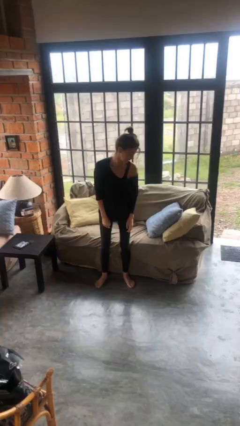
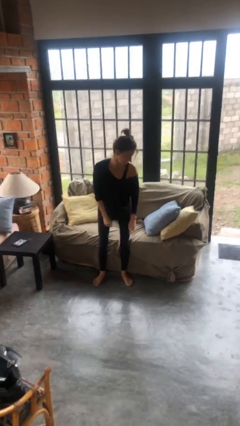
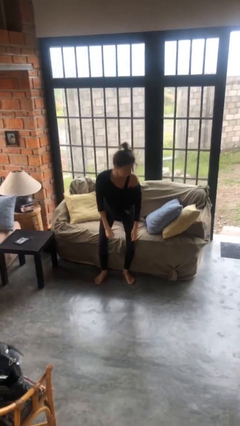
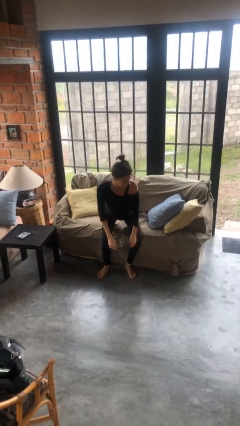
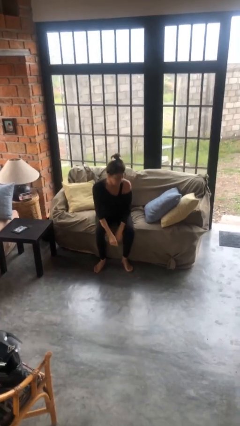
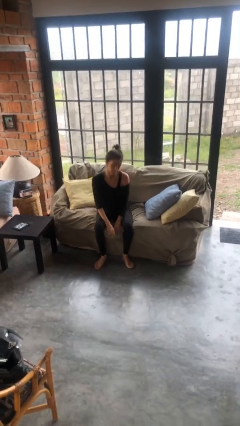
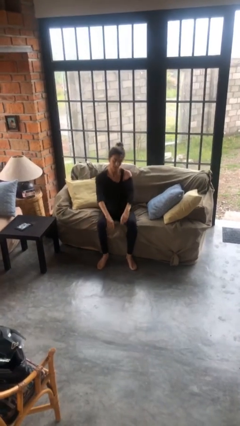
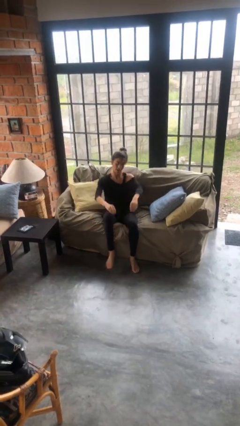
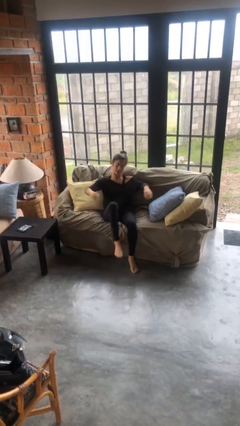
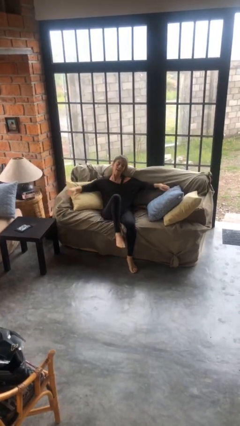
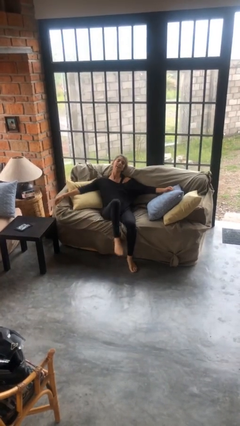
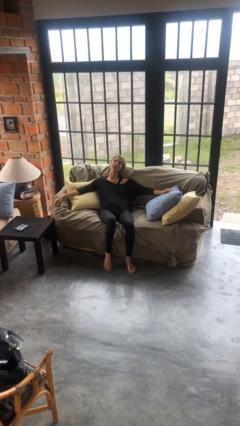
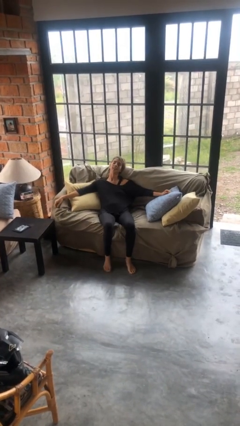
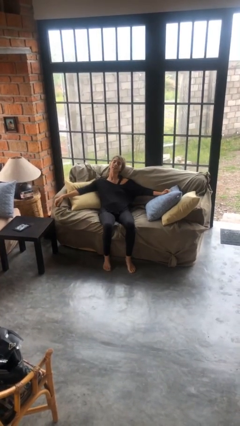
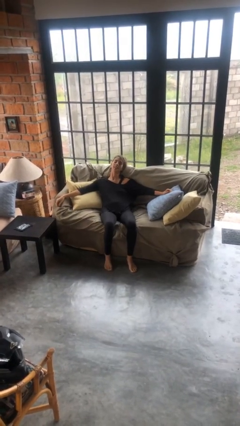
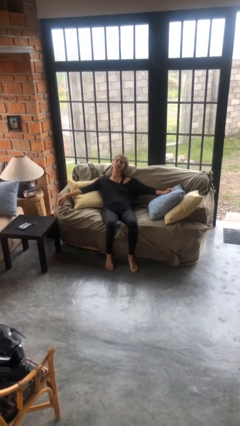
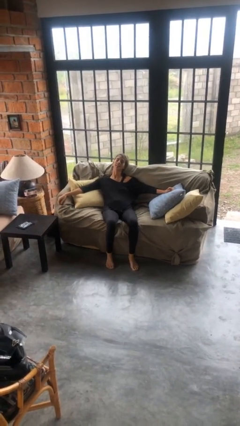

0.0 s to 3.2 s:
person lies down on couch

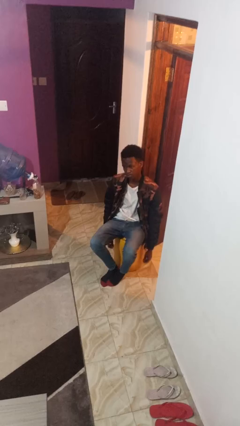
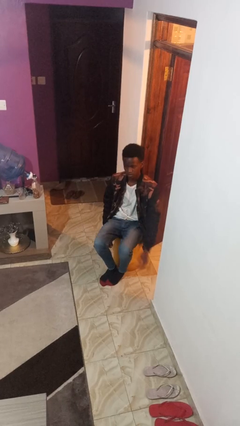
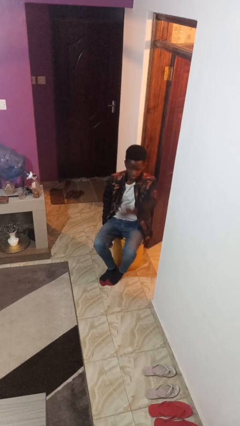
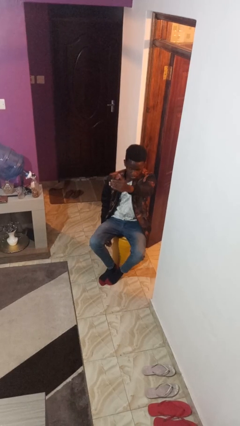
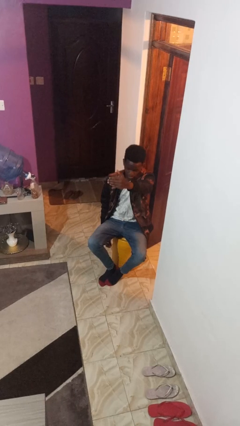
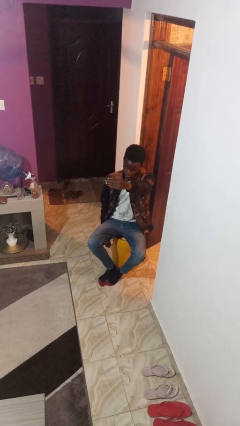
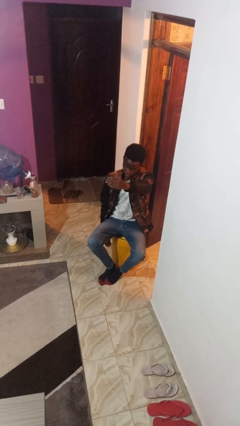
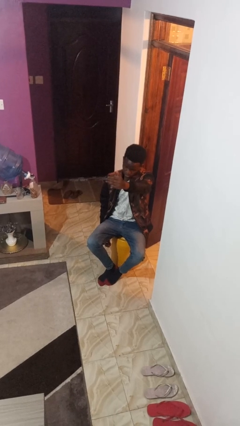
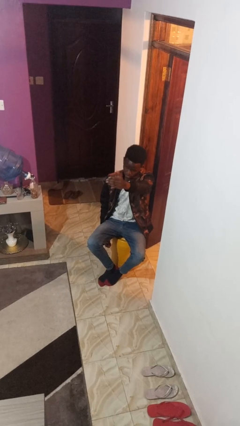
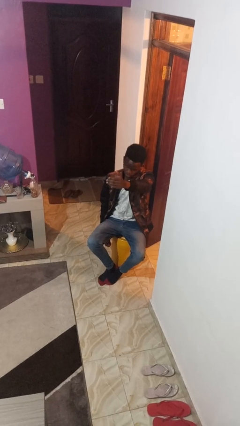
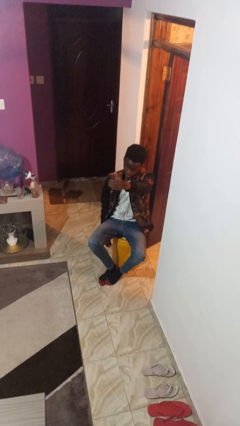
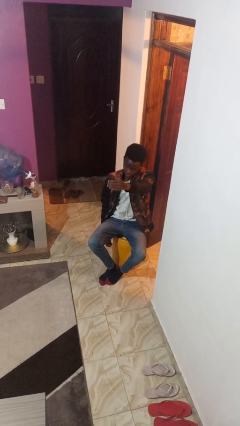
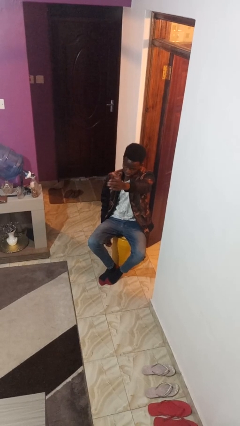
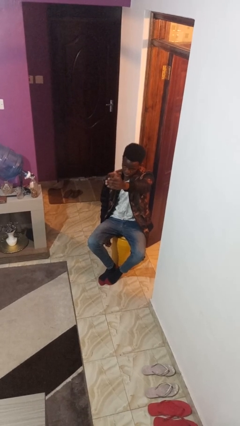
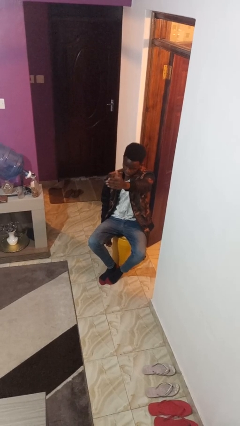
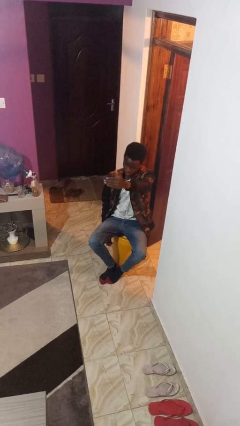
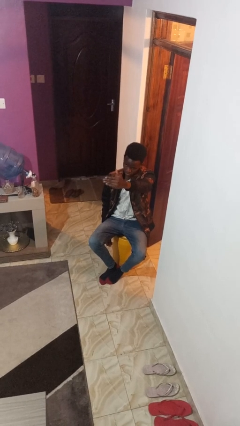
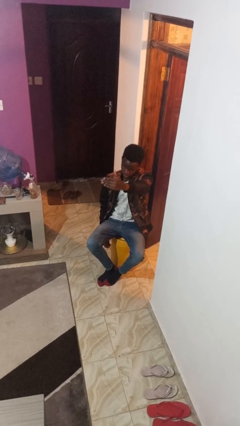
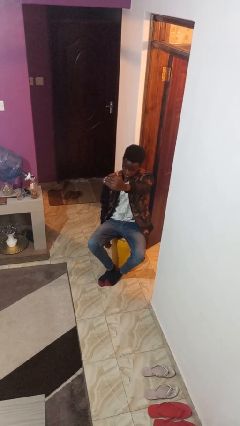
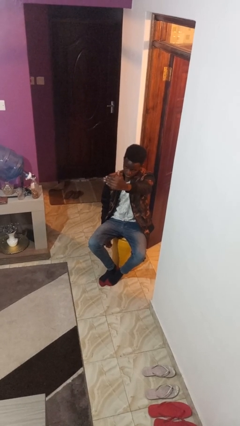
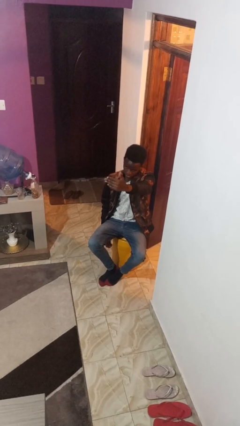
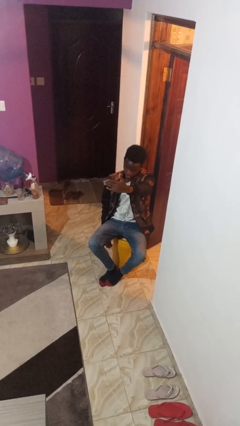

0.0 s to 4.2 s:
person gestures come here

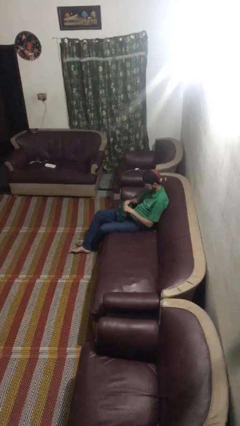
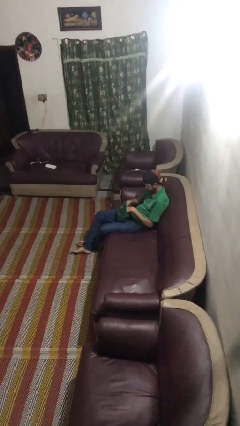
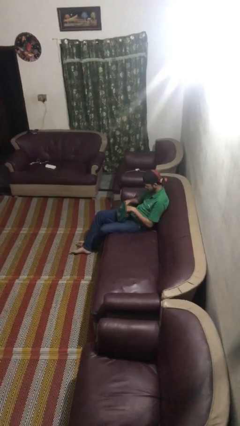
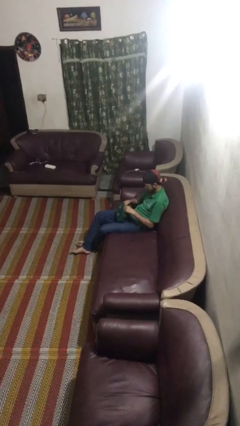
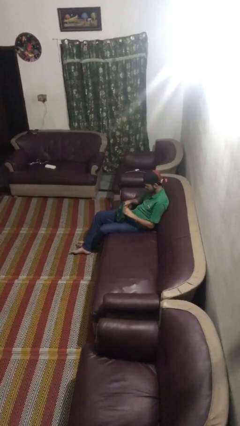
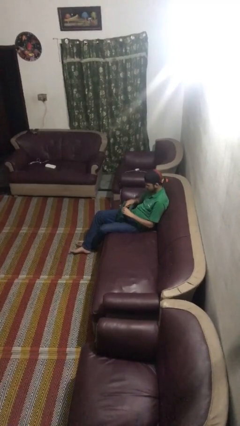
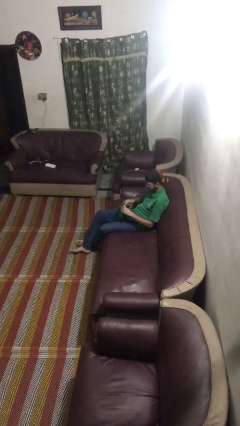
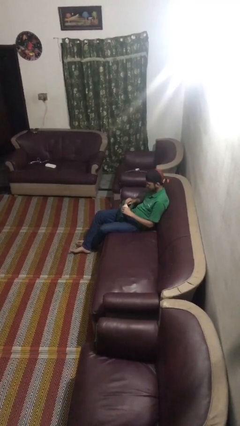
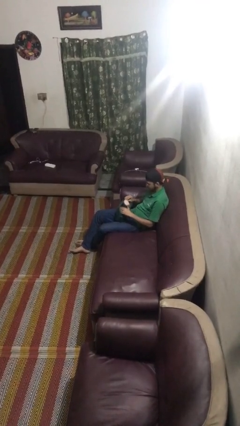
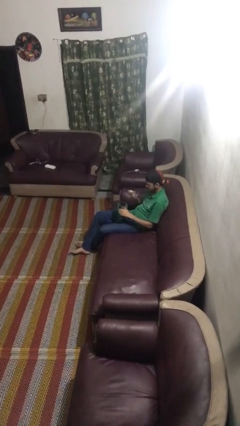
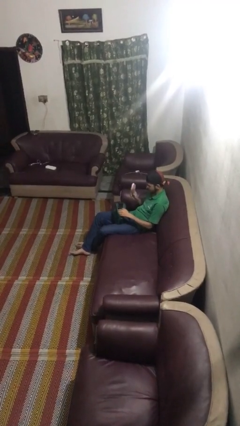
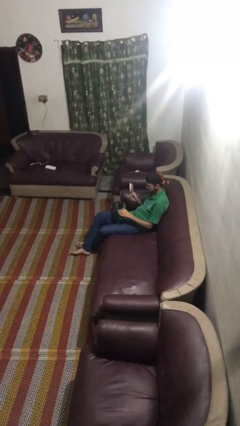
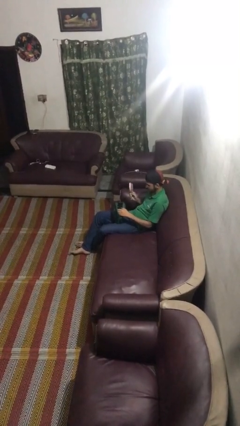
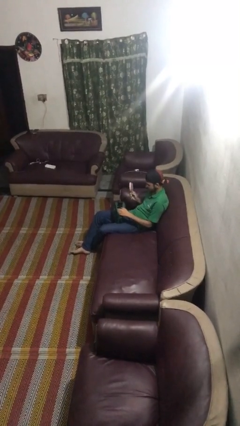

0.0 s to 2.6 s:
person takes object from purse

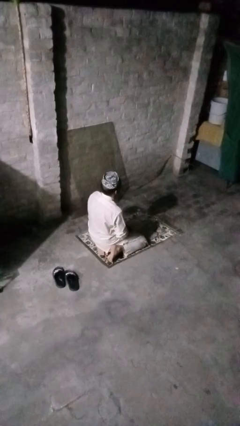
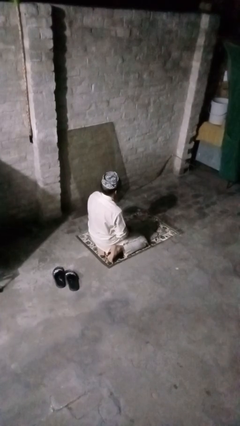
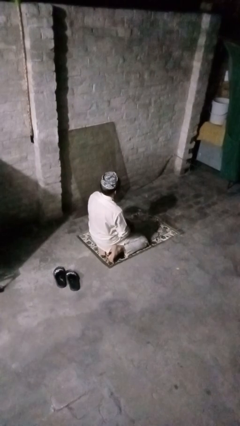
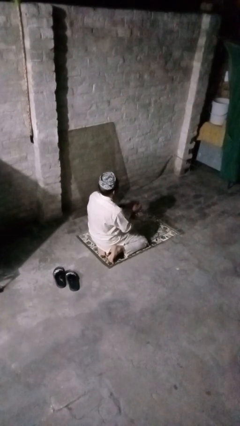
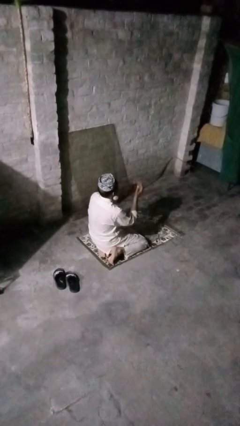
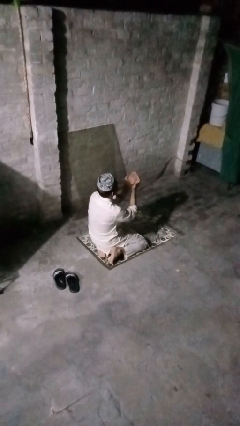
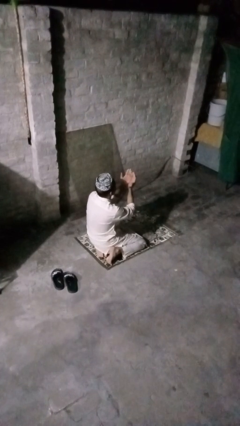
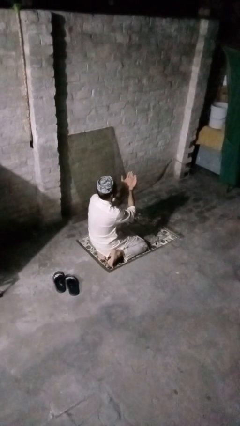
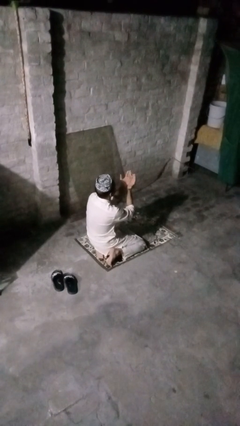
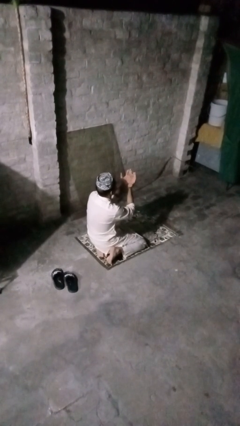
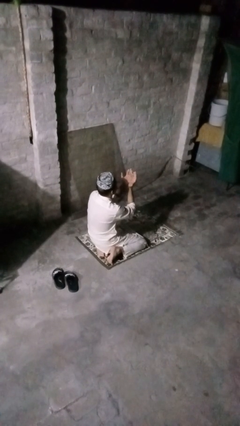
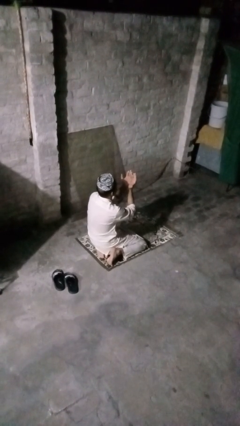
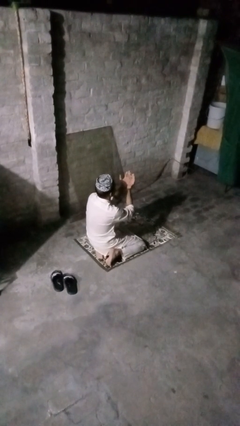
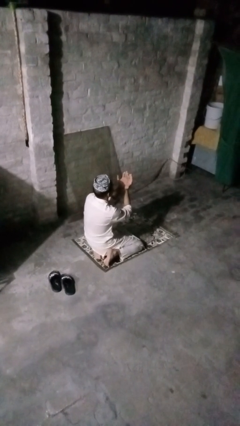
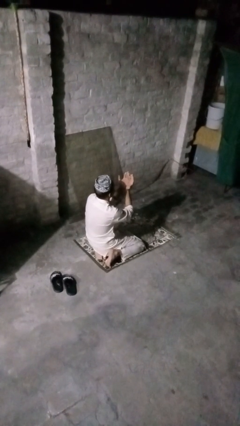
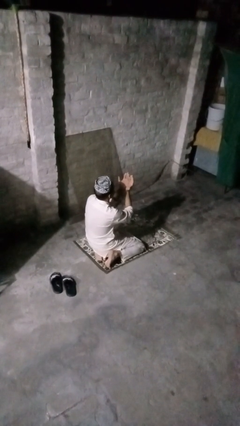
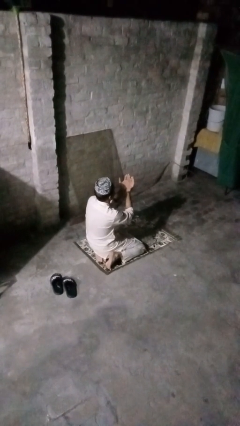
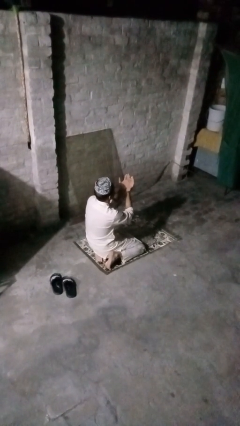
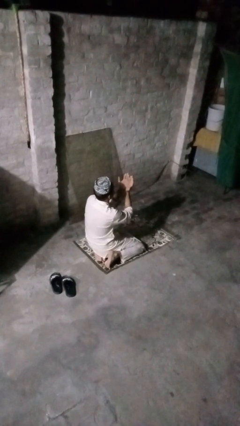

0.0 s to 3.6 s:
person prays

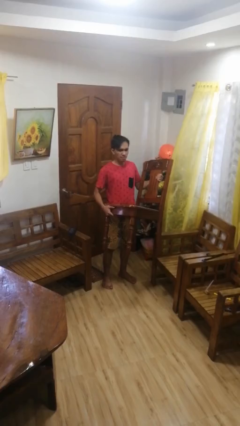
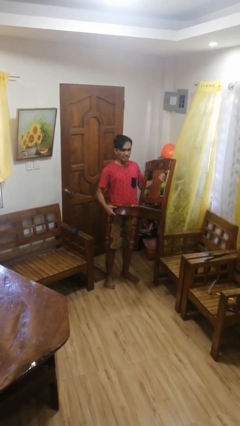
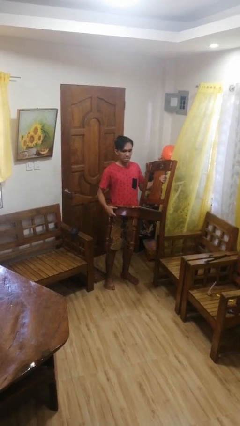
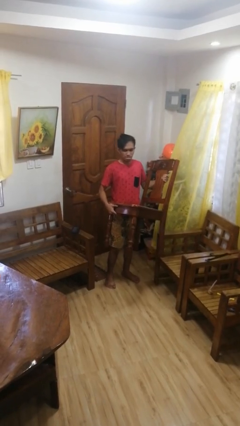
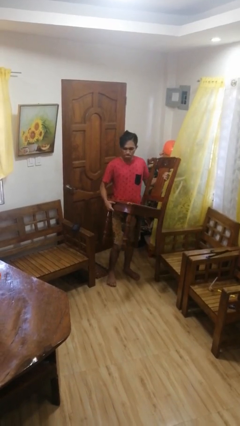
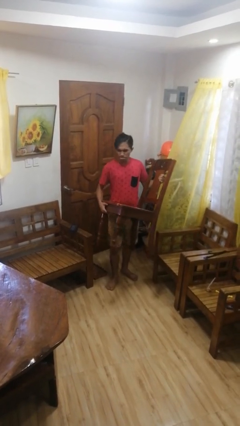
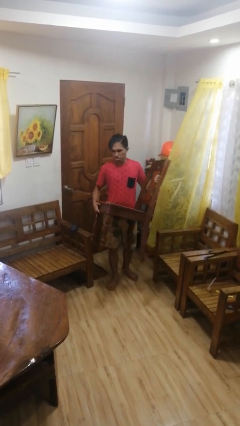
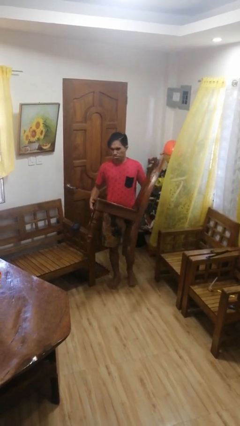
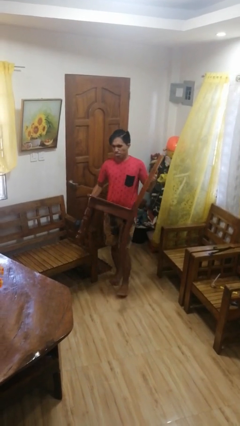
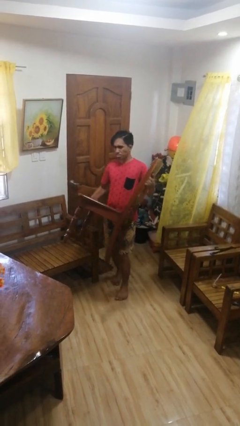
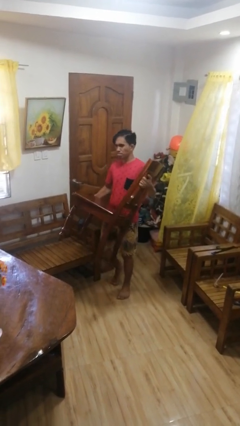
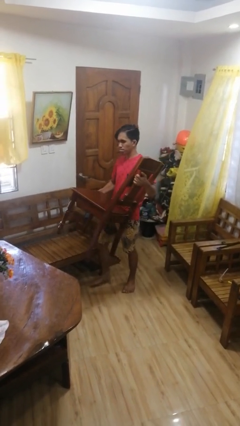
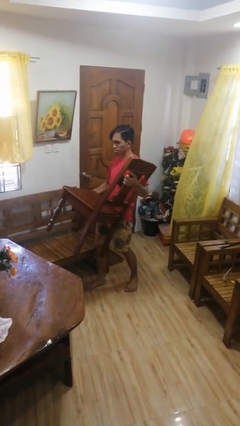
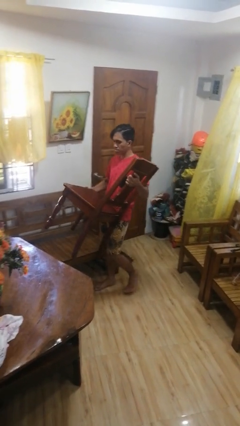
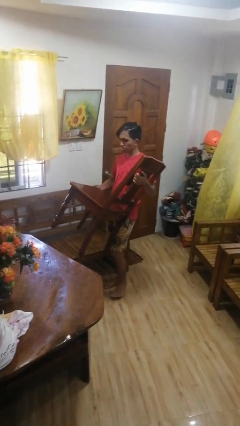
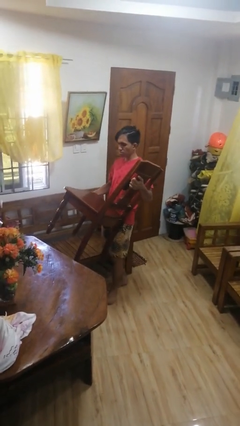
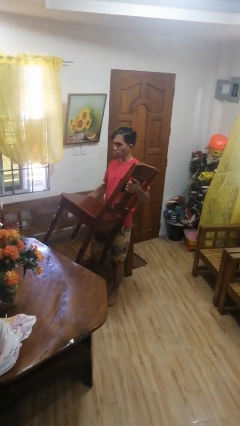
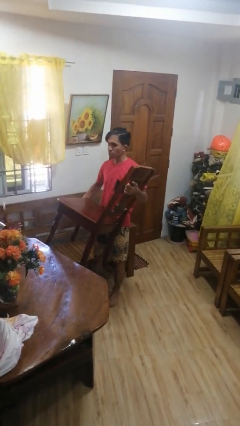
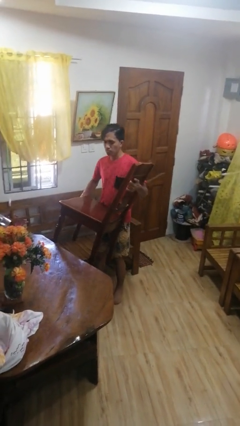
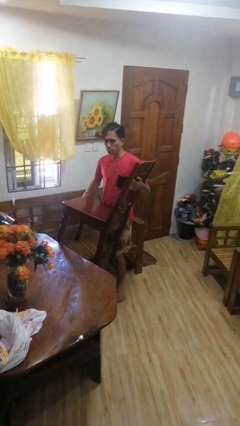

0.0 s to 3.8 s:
person carries furniture
